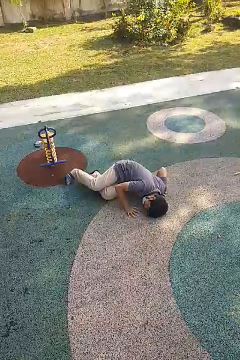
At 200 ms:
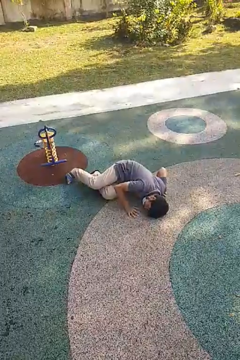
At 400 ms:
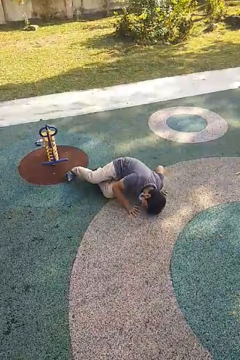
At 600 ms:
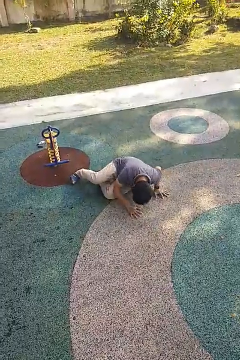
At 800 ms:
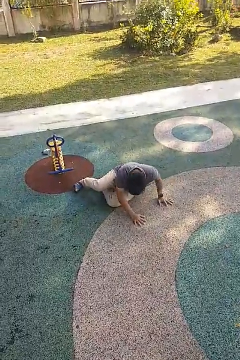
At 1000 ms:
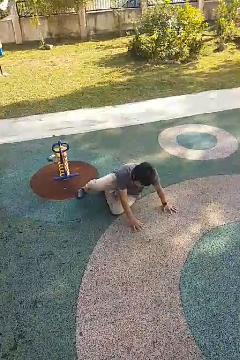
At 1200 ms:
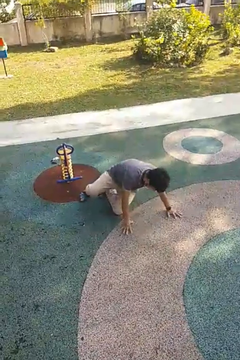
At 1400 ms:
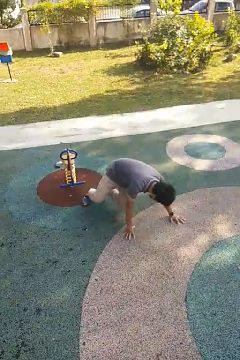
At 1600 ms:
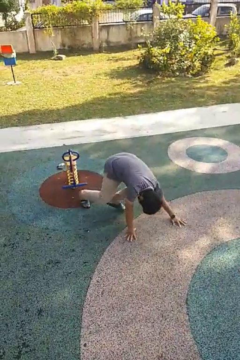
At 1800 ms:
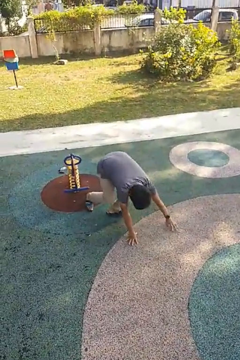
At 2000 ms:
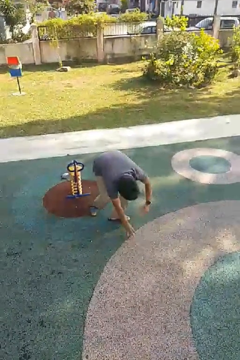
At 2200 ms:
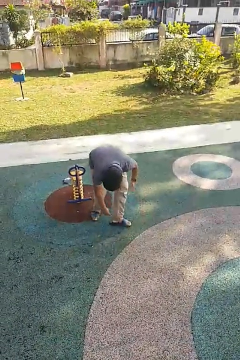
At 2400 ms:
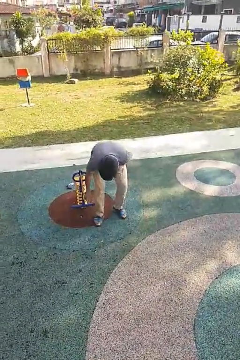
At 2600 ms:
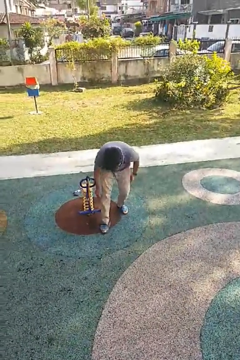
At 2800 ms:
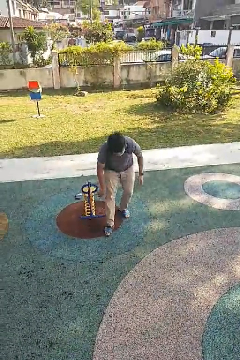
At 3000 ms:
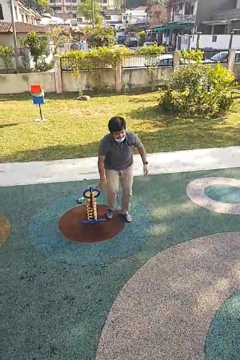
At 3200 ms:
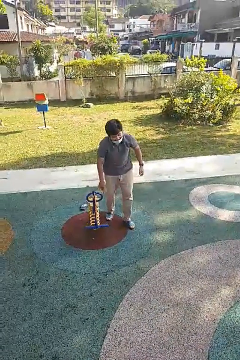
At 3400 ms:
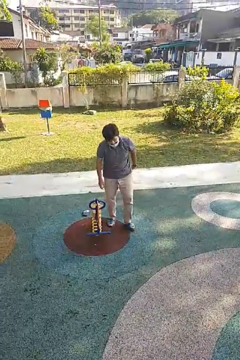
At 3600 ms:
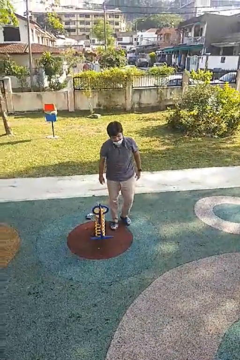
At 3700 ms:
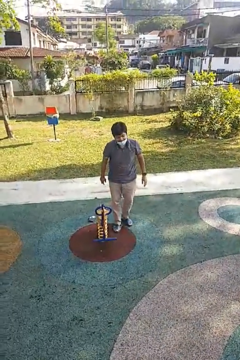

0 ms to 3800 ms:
person stands up from floor

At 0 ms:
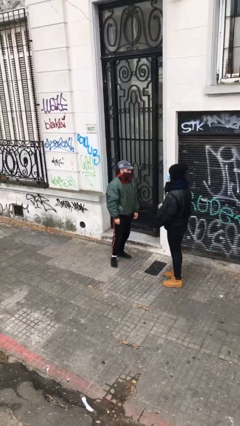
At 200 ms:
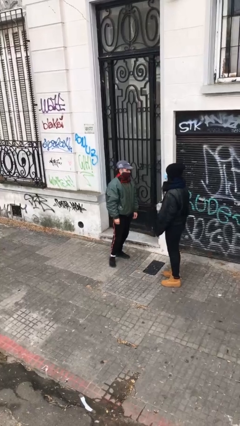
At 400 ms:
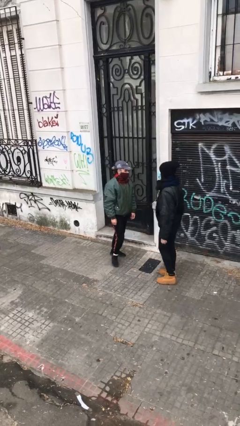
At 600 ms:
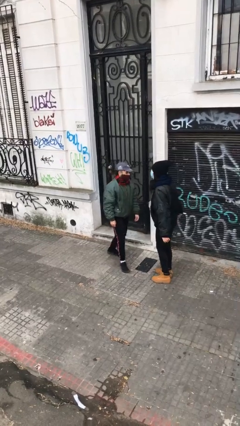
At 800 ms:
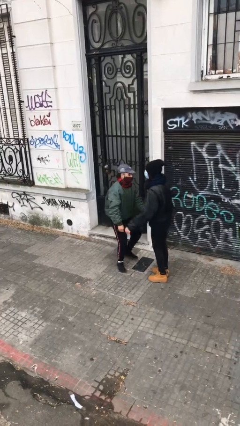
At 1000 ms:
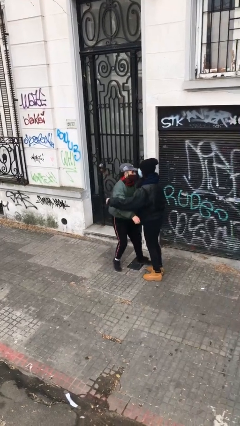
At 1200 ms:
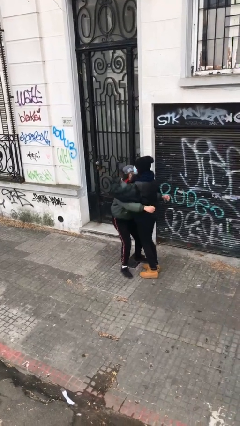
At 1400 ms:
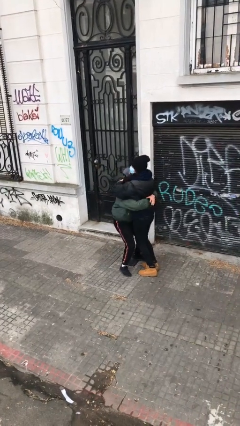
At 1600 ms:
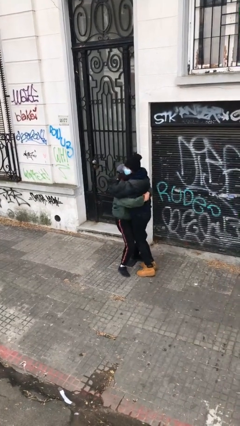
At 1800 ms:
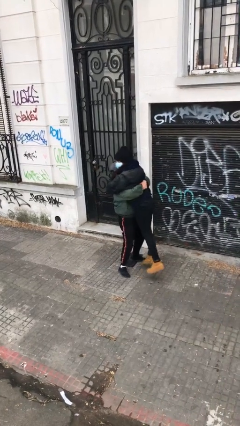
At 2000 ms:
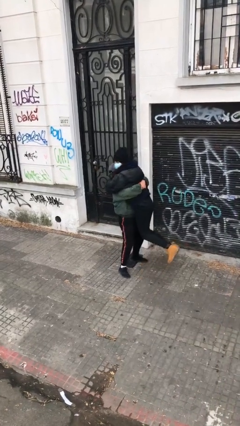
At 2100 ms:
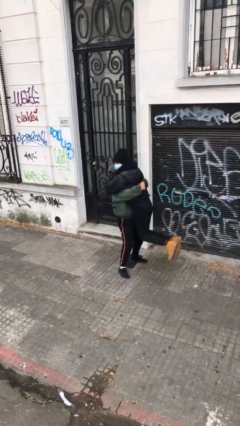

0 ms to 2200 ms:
person picks up person

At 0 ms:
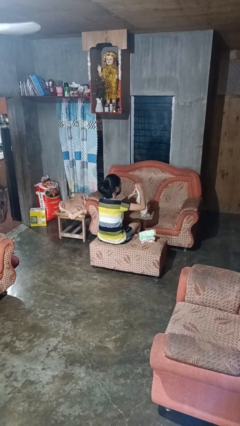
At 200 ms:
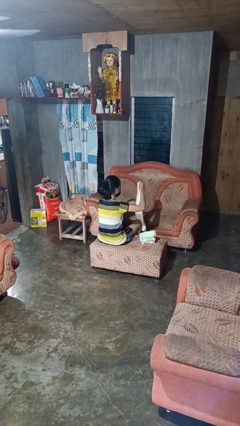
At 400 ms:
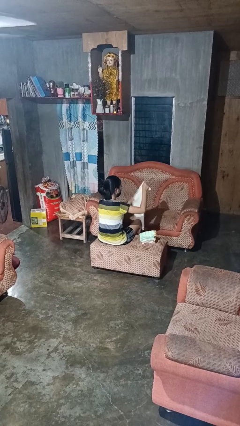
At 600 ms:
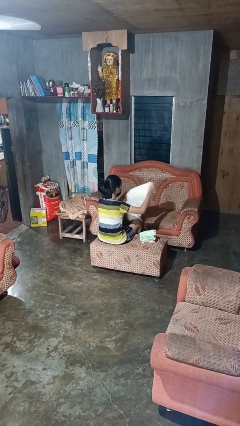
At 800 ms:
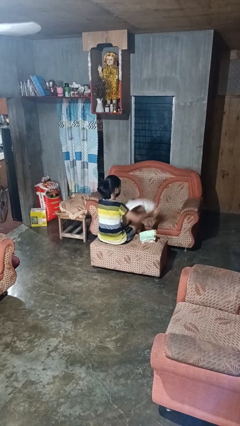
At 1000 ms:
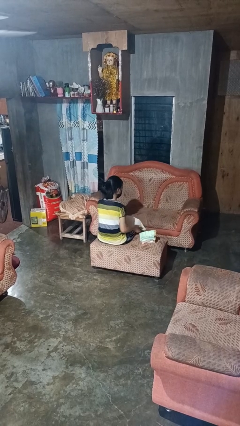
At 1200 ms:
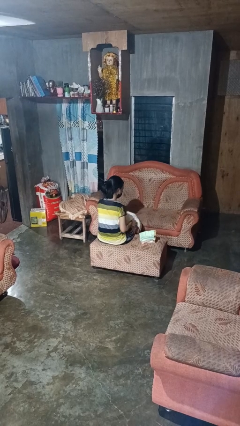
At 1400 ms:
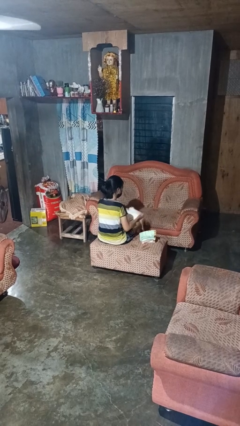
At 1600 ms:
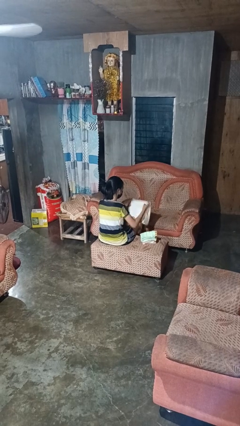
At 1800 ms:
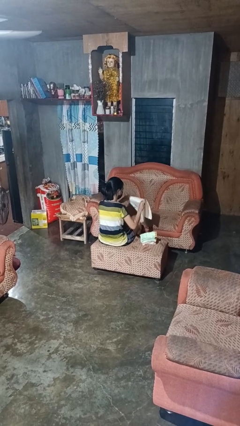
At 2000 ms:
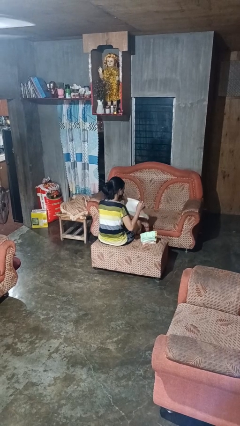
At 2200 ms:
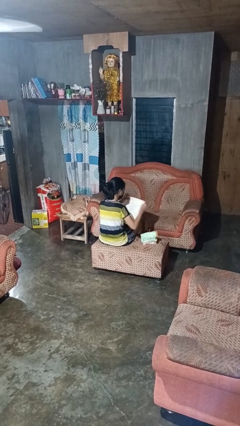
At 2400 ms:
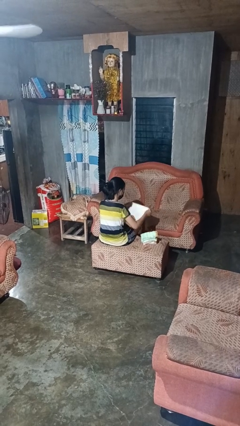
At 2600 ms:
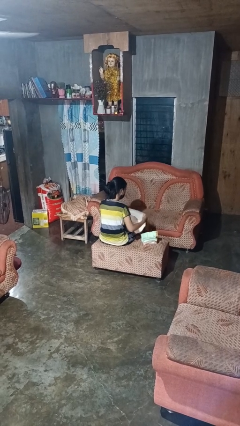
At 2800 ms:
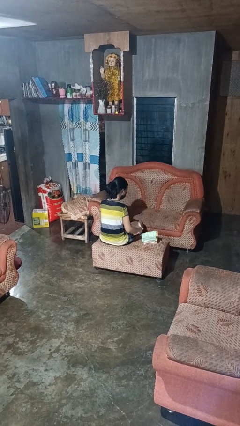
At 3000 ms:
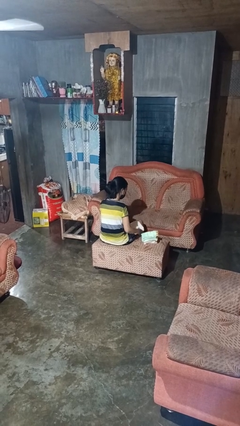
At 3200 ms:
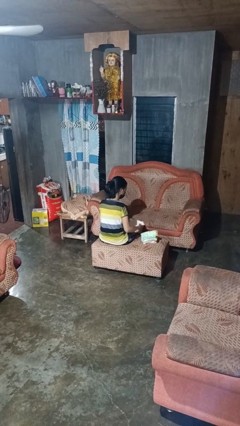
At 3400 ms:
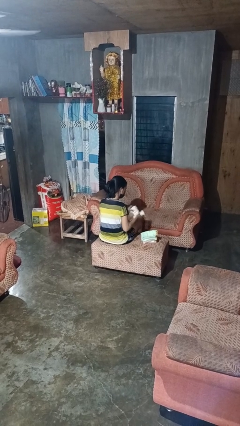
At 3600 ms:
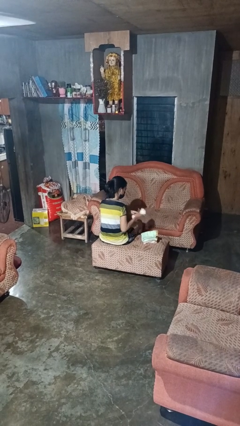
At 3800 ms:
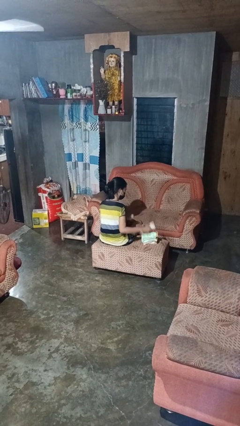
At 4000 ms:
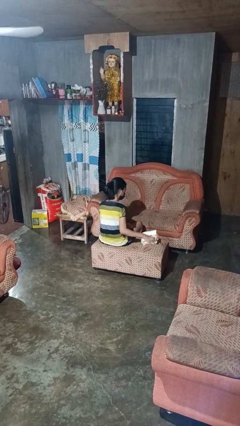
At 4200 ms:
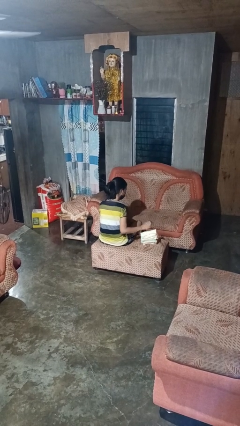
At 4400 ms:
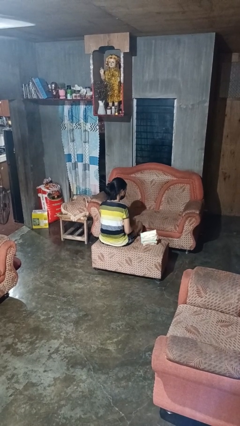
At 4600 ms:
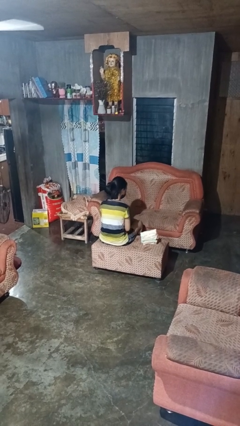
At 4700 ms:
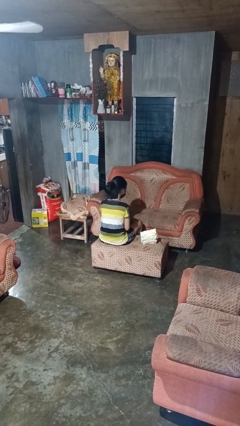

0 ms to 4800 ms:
person folds towel

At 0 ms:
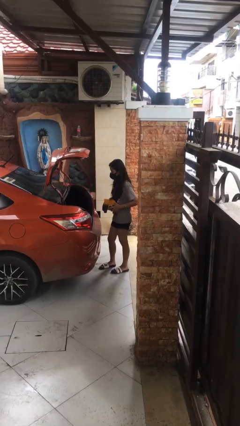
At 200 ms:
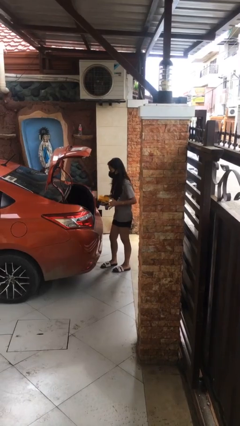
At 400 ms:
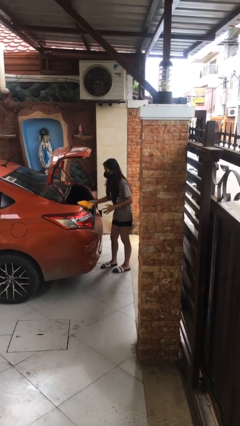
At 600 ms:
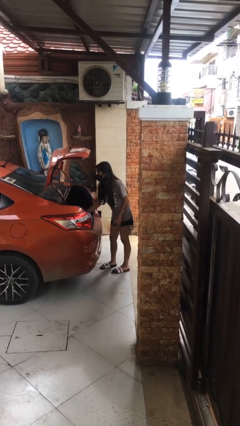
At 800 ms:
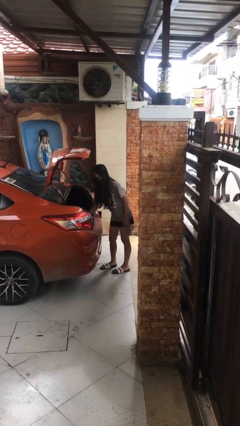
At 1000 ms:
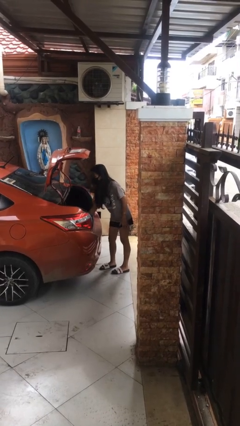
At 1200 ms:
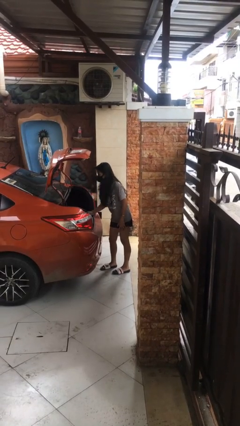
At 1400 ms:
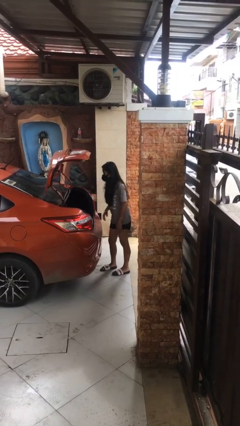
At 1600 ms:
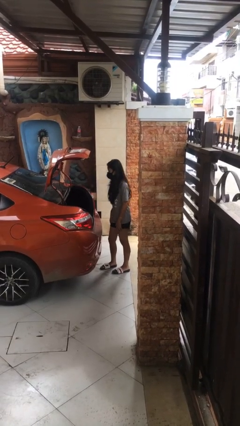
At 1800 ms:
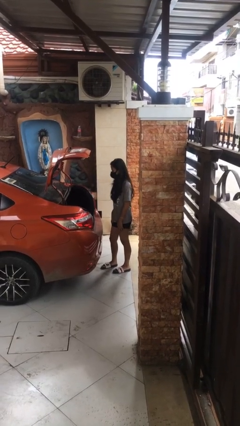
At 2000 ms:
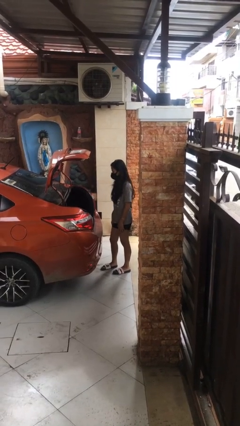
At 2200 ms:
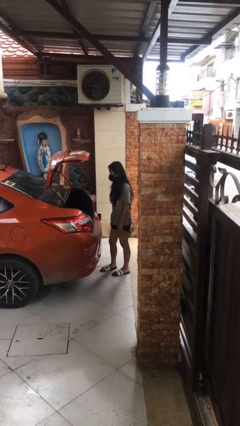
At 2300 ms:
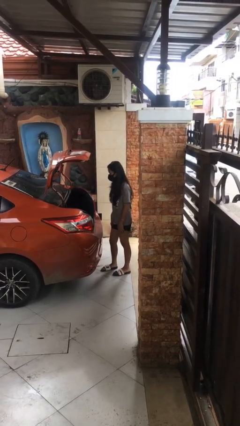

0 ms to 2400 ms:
person loads car

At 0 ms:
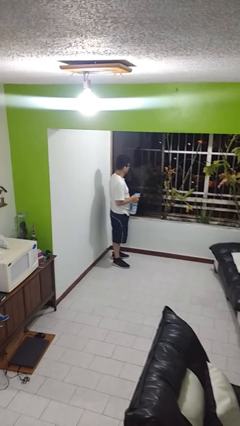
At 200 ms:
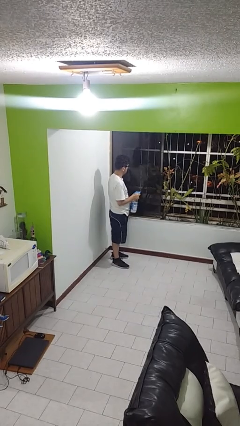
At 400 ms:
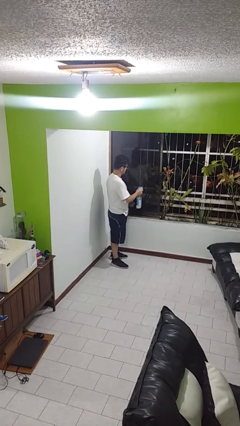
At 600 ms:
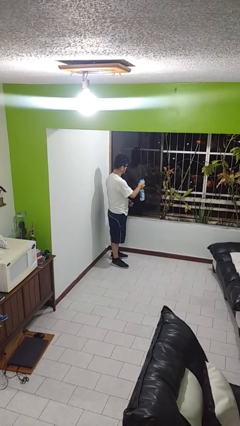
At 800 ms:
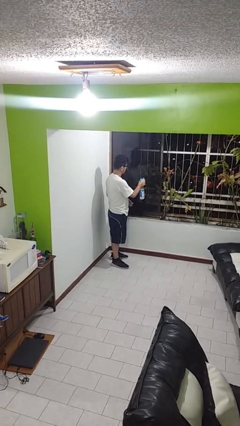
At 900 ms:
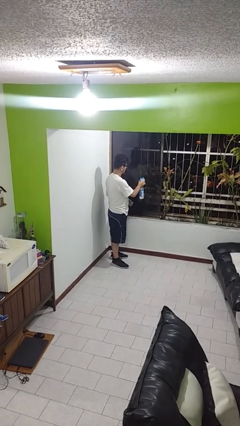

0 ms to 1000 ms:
person sprays from bottle

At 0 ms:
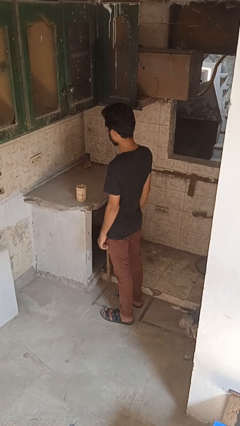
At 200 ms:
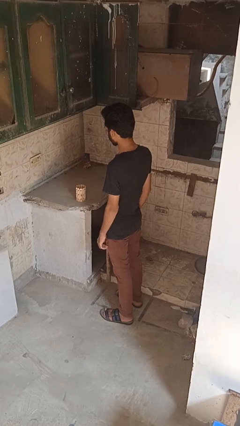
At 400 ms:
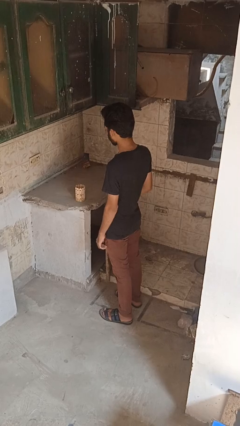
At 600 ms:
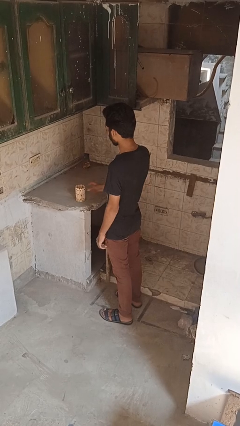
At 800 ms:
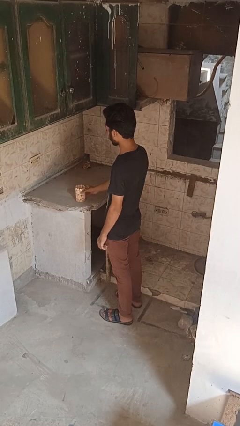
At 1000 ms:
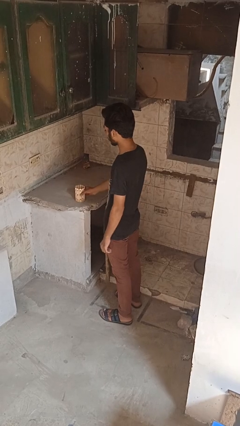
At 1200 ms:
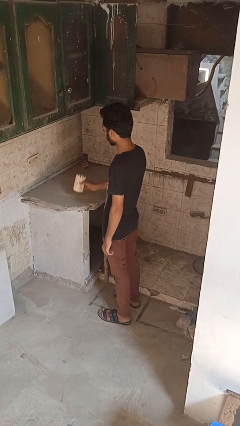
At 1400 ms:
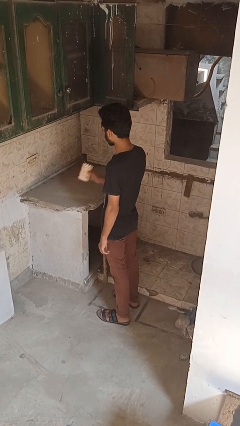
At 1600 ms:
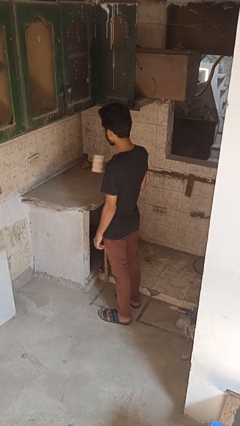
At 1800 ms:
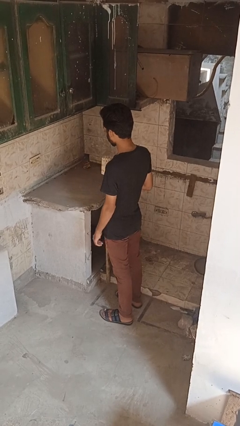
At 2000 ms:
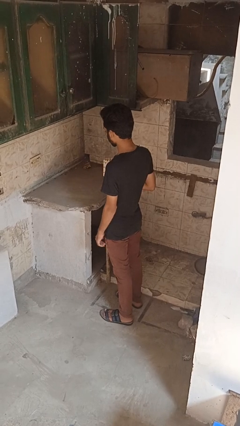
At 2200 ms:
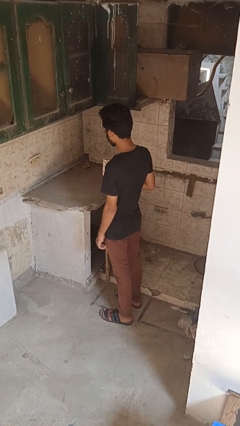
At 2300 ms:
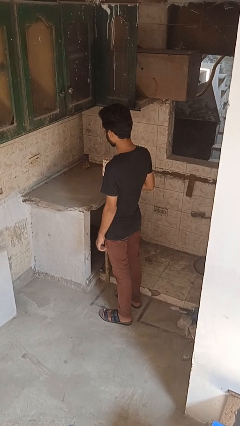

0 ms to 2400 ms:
person picks up object from countertop

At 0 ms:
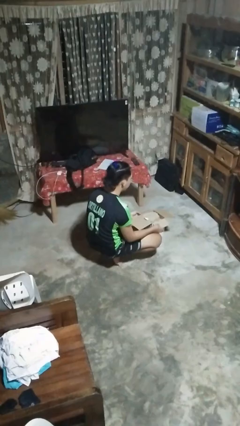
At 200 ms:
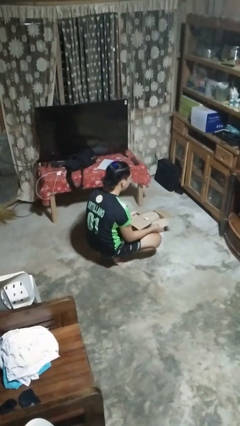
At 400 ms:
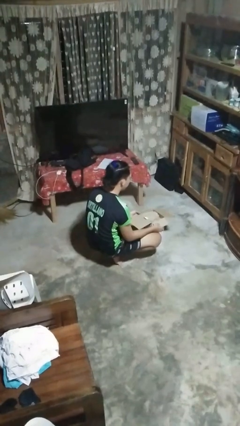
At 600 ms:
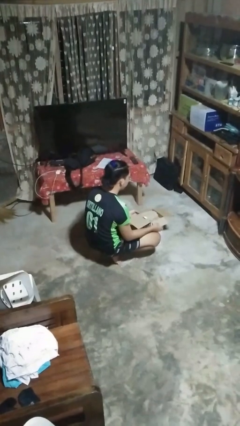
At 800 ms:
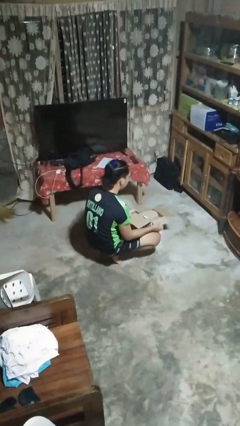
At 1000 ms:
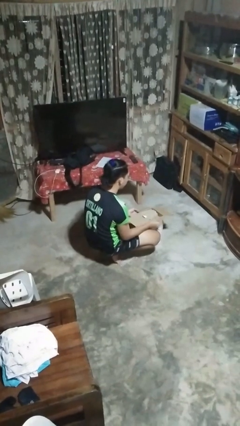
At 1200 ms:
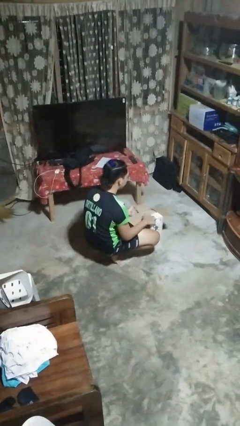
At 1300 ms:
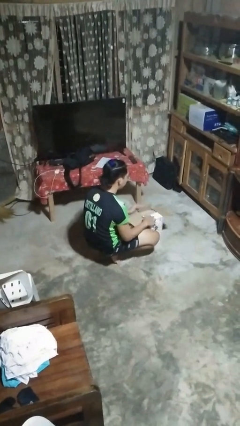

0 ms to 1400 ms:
person closes box

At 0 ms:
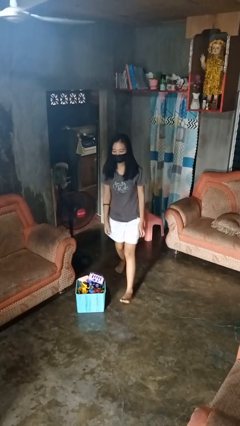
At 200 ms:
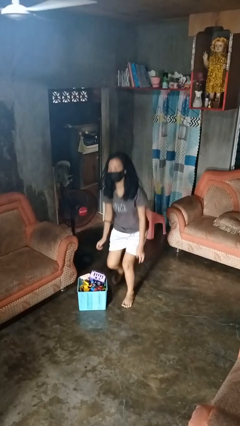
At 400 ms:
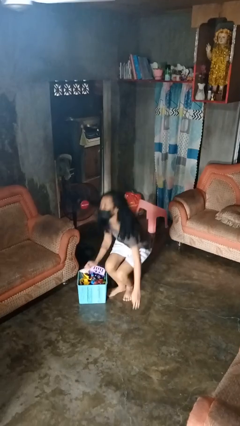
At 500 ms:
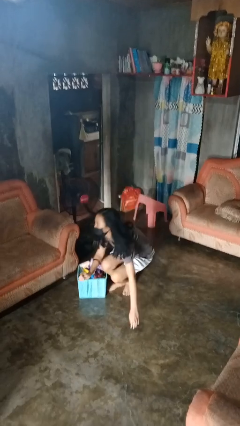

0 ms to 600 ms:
person trips on object on floor
